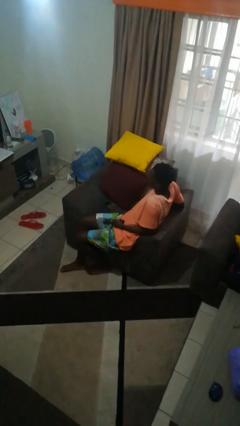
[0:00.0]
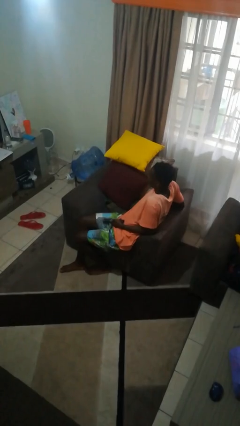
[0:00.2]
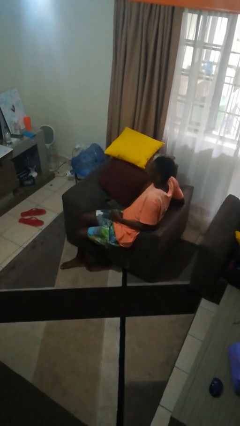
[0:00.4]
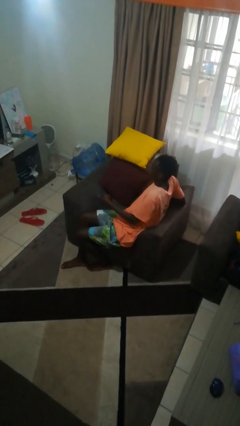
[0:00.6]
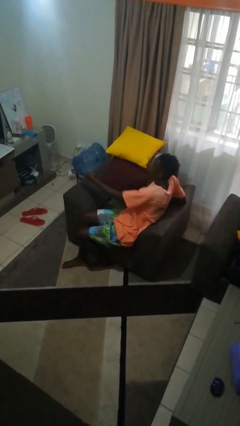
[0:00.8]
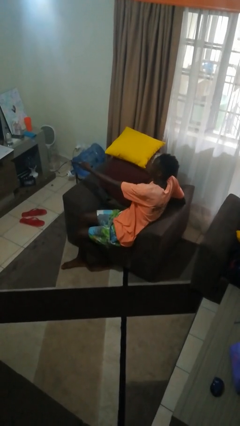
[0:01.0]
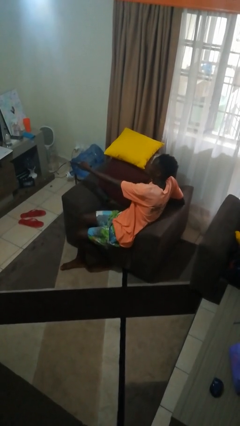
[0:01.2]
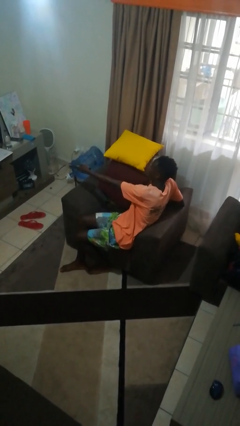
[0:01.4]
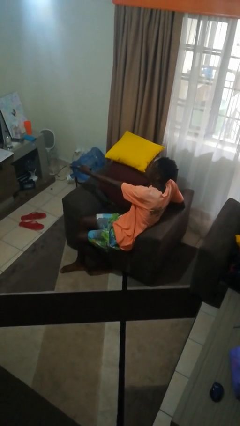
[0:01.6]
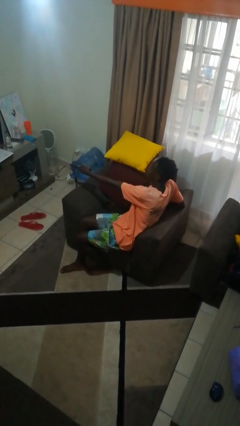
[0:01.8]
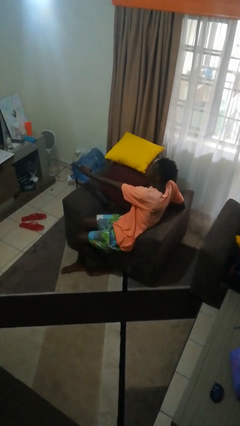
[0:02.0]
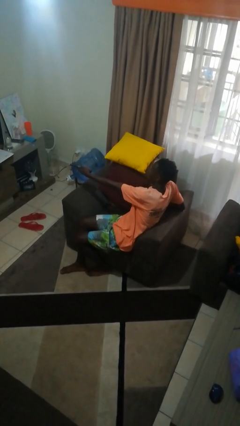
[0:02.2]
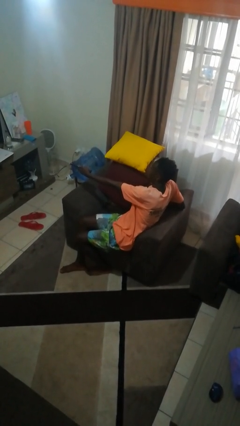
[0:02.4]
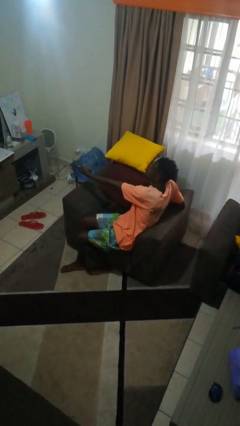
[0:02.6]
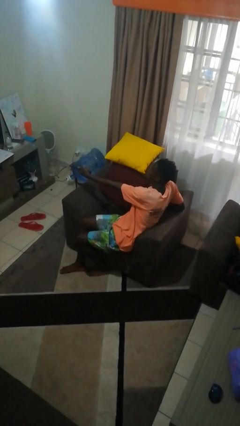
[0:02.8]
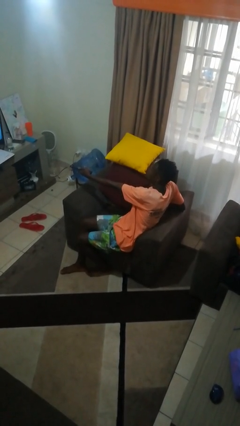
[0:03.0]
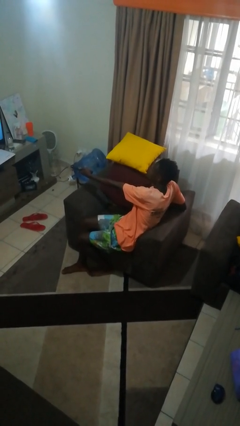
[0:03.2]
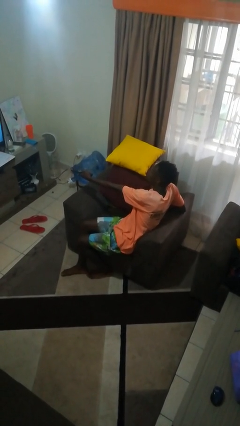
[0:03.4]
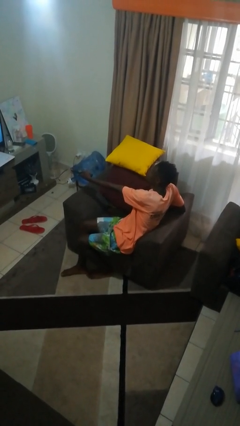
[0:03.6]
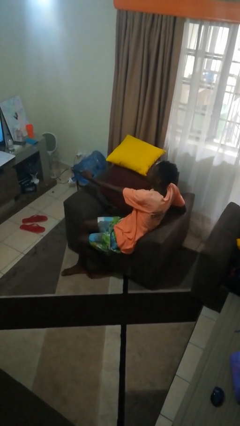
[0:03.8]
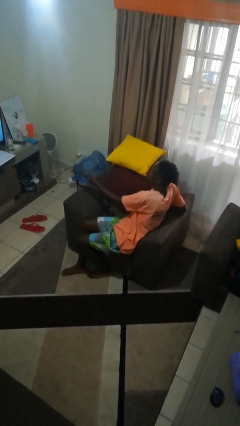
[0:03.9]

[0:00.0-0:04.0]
person uses television remote

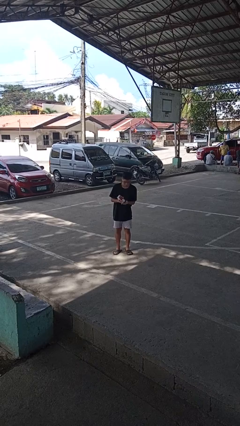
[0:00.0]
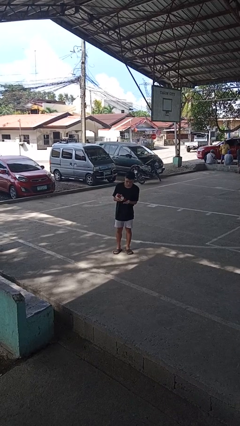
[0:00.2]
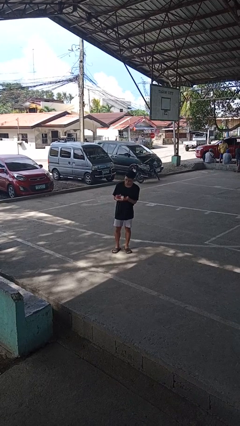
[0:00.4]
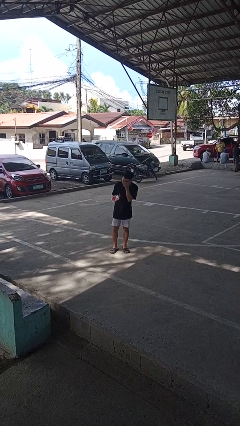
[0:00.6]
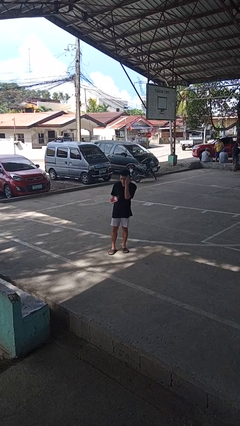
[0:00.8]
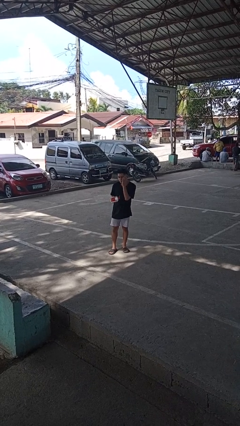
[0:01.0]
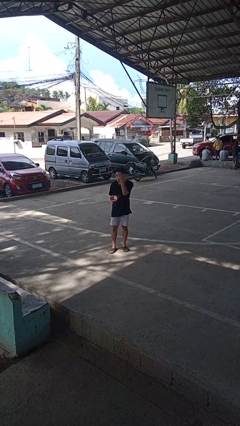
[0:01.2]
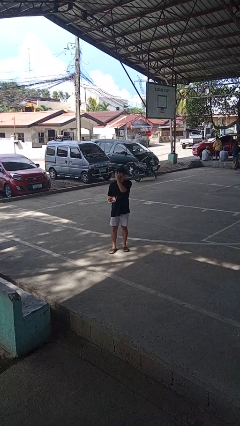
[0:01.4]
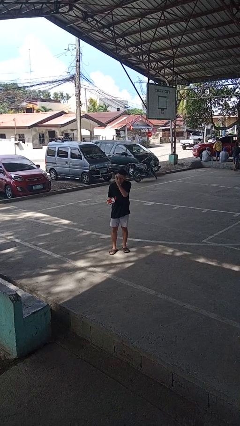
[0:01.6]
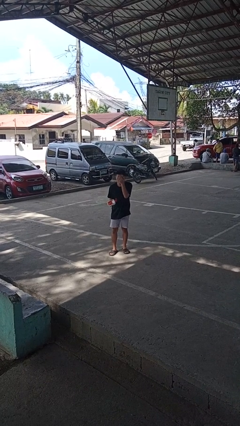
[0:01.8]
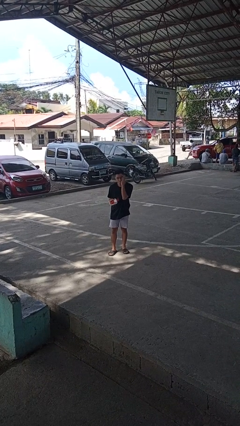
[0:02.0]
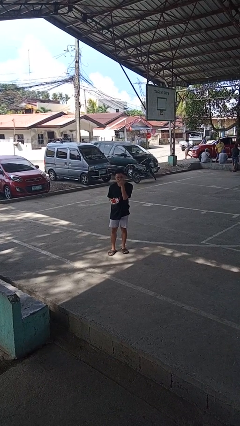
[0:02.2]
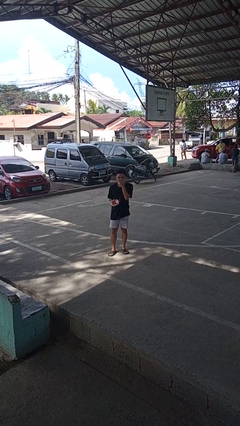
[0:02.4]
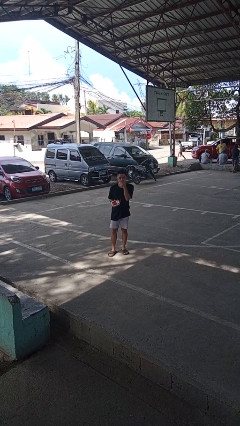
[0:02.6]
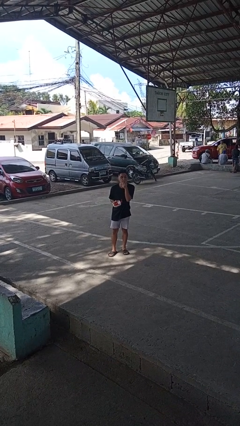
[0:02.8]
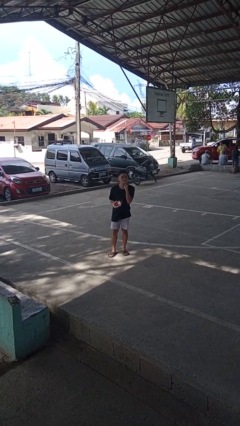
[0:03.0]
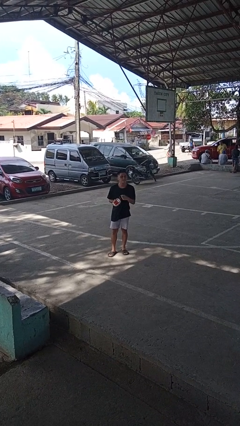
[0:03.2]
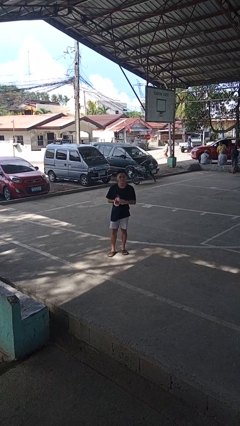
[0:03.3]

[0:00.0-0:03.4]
person applies facial moisturizer

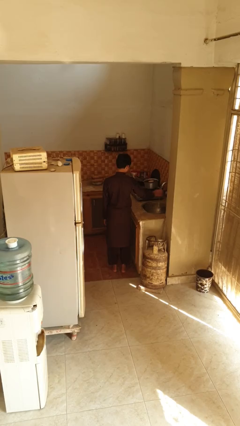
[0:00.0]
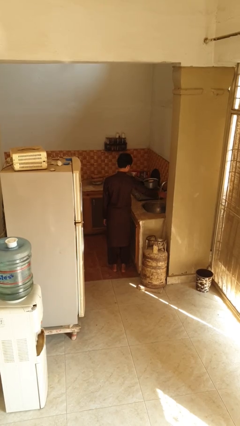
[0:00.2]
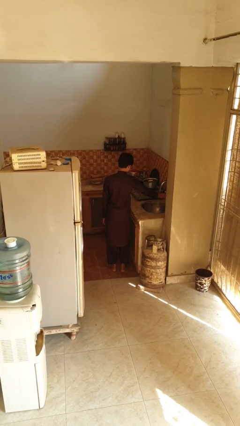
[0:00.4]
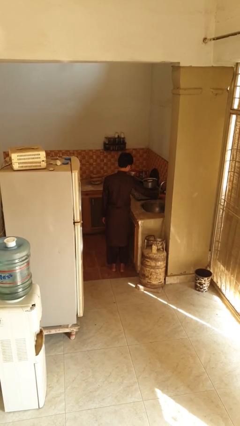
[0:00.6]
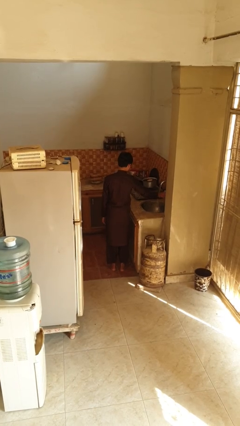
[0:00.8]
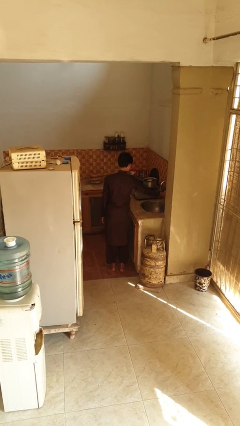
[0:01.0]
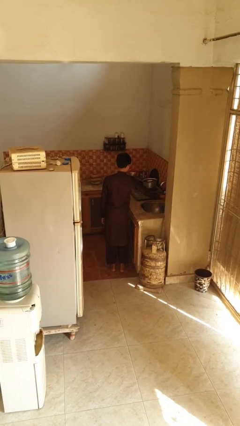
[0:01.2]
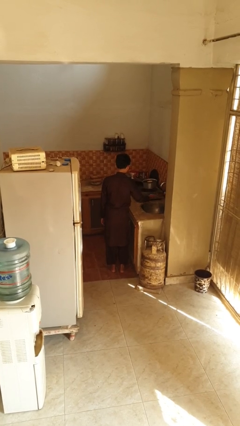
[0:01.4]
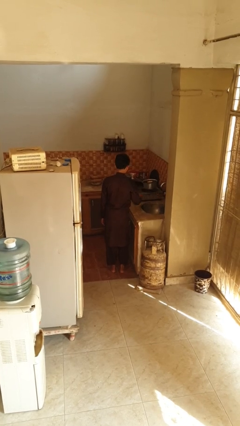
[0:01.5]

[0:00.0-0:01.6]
person turns off faucet

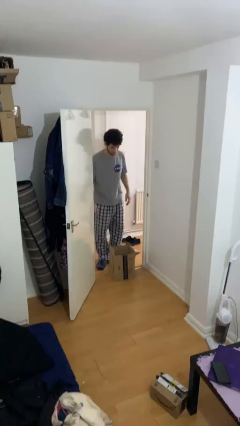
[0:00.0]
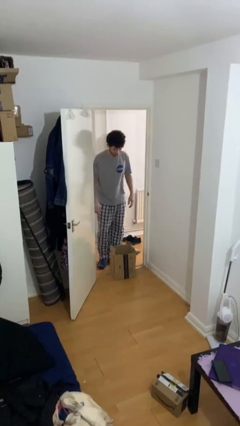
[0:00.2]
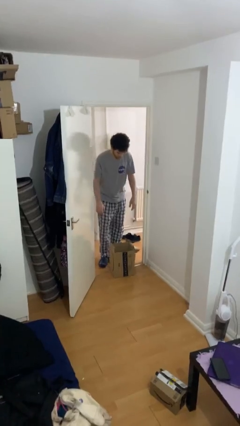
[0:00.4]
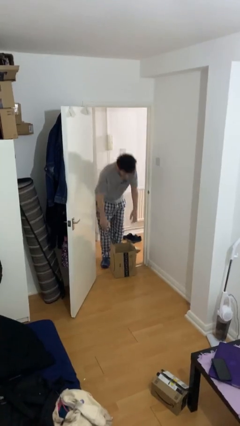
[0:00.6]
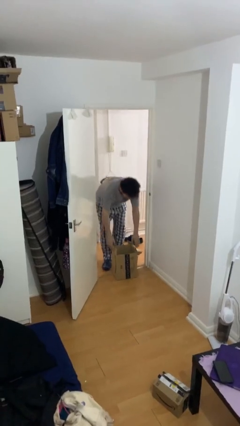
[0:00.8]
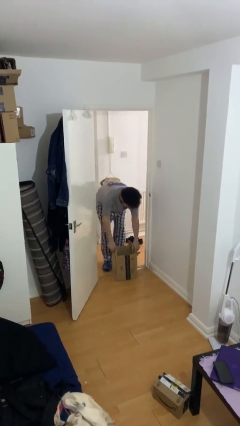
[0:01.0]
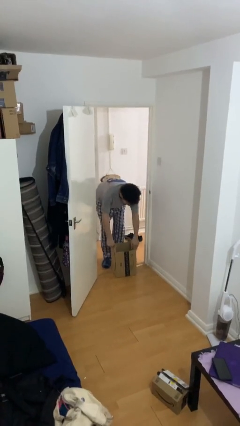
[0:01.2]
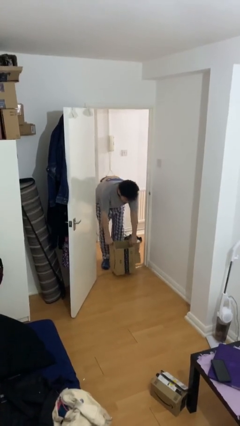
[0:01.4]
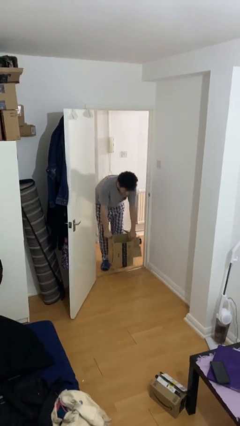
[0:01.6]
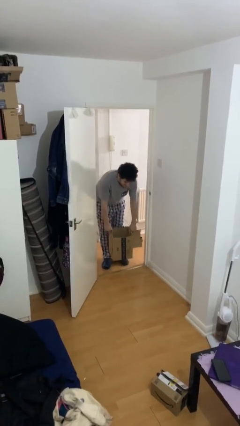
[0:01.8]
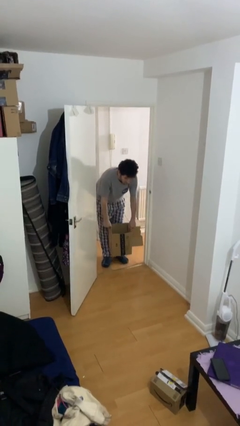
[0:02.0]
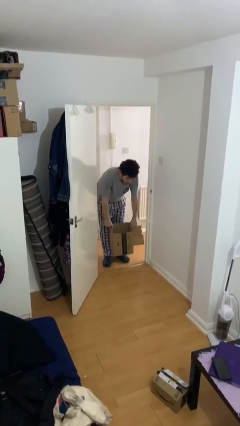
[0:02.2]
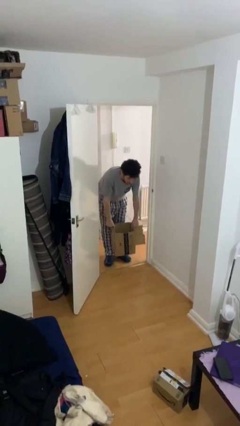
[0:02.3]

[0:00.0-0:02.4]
person picks up object from floor

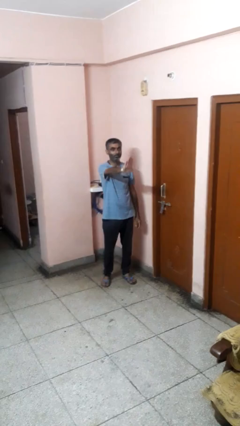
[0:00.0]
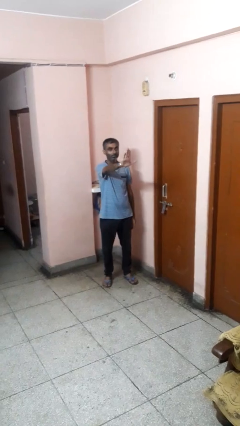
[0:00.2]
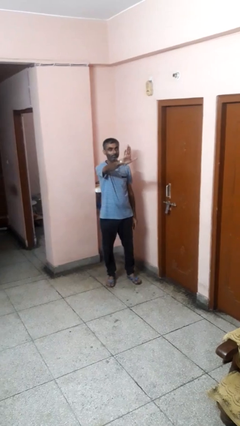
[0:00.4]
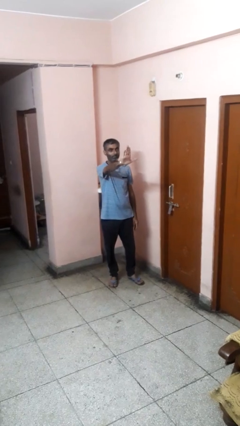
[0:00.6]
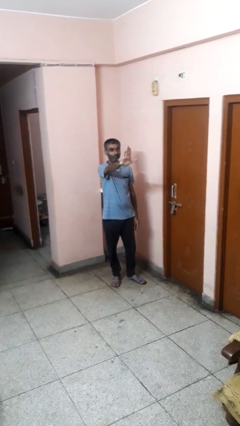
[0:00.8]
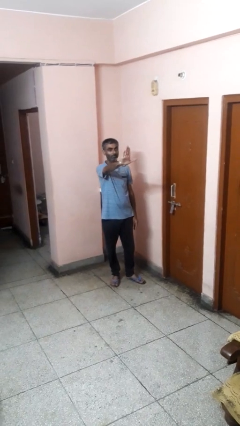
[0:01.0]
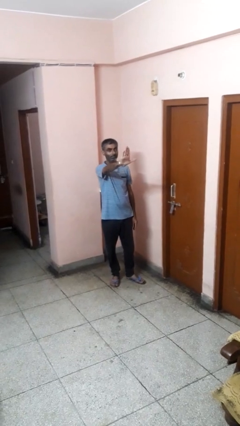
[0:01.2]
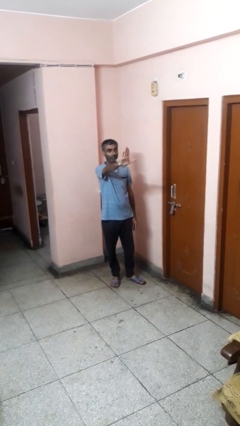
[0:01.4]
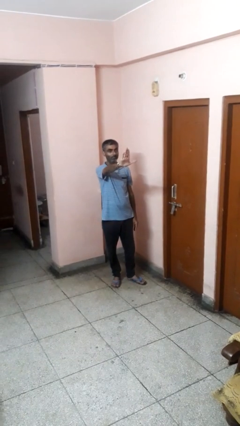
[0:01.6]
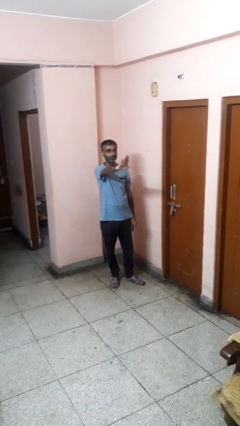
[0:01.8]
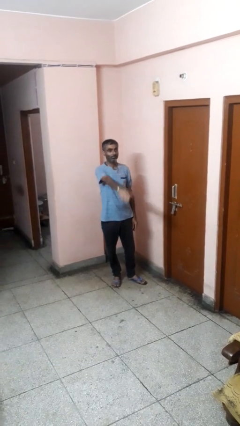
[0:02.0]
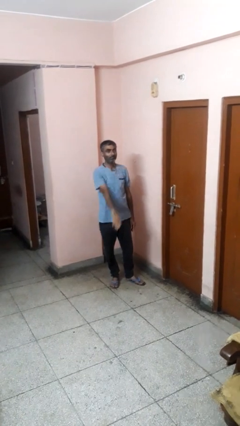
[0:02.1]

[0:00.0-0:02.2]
person gestures stop

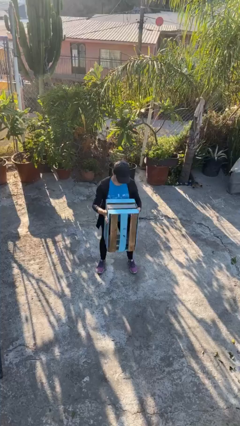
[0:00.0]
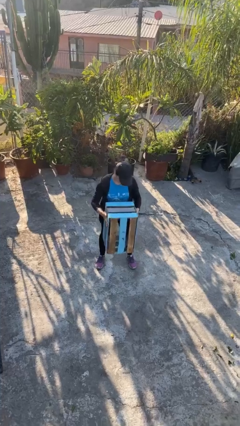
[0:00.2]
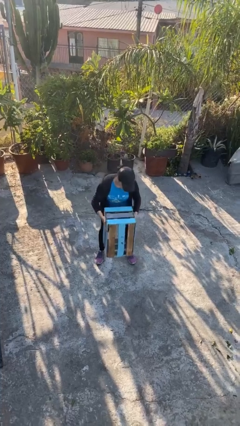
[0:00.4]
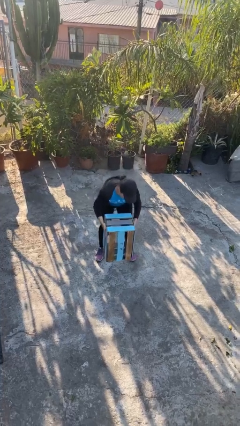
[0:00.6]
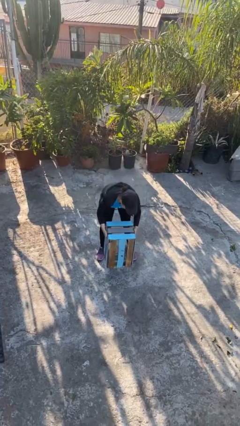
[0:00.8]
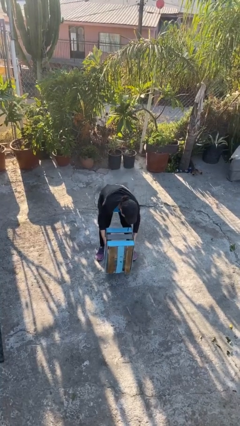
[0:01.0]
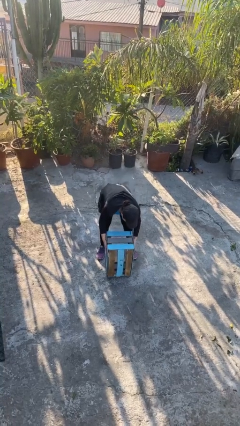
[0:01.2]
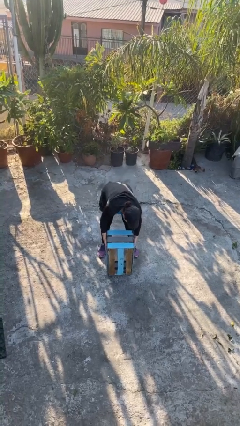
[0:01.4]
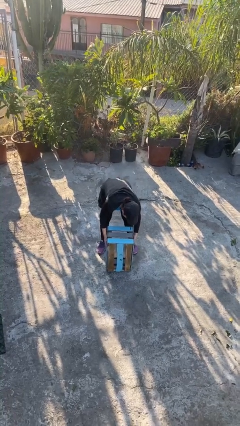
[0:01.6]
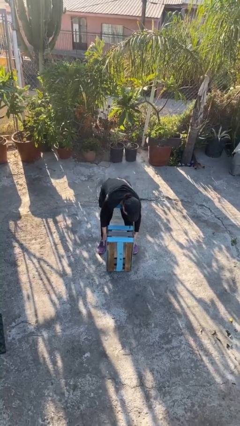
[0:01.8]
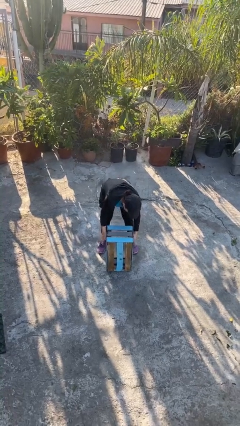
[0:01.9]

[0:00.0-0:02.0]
person puts down object on floor

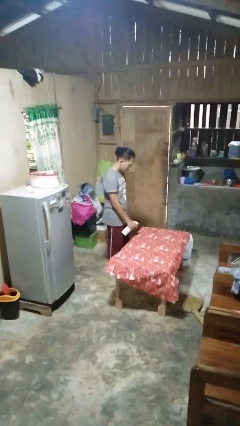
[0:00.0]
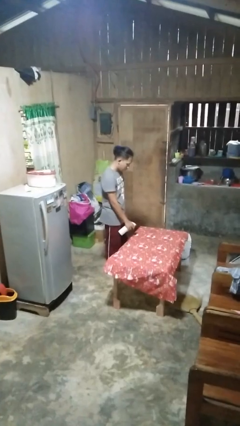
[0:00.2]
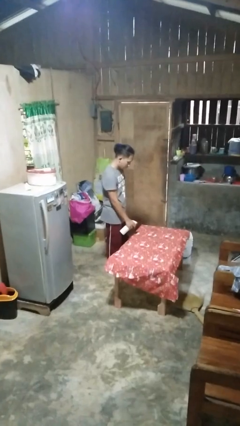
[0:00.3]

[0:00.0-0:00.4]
person sprays from bottle
